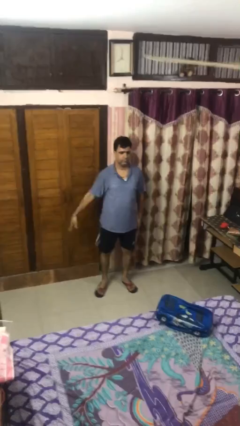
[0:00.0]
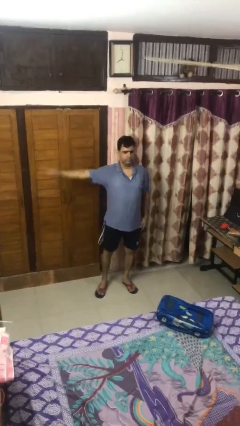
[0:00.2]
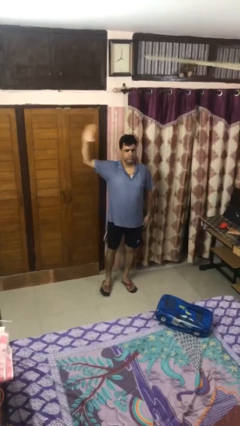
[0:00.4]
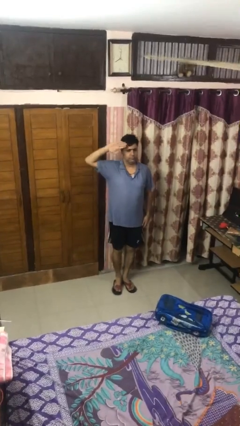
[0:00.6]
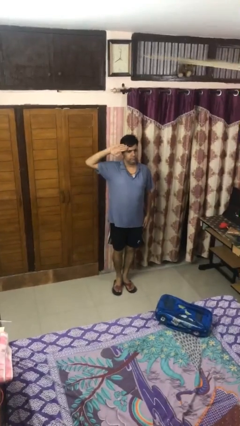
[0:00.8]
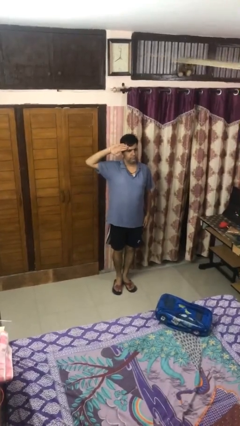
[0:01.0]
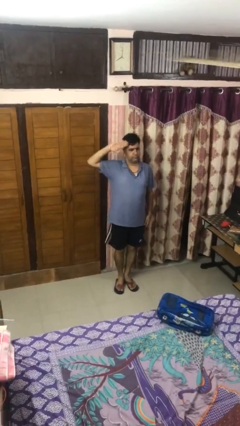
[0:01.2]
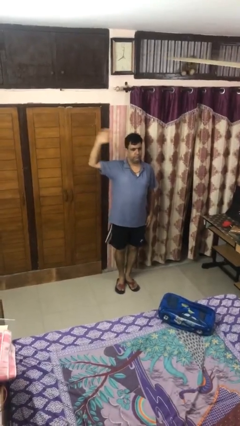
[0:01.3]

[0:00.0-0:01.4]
person salutes

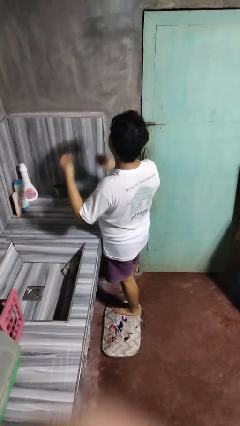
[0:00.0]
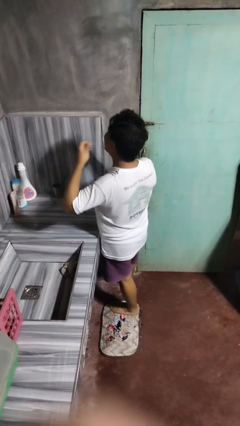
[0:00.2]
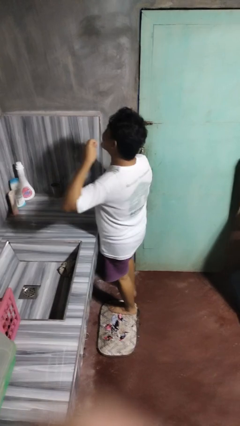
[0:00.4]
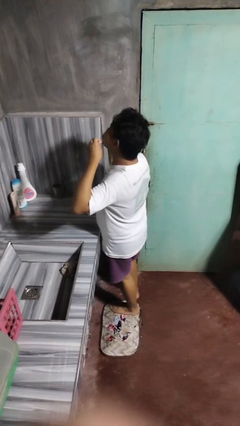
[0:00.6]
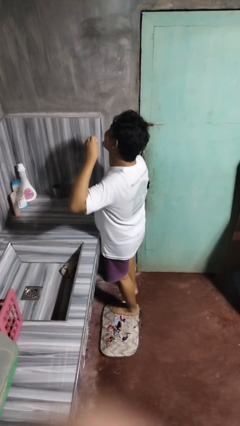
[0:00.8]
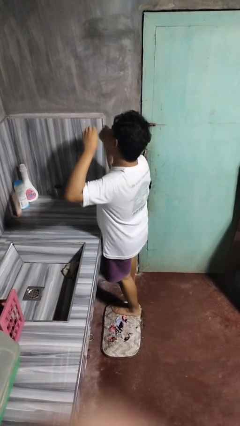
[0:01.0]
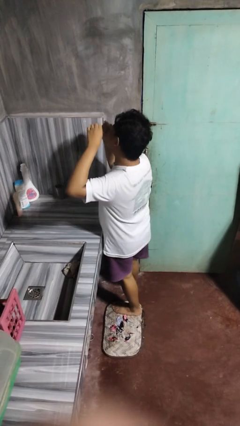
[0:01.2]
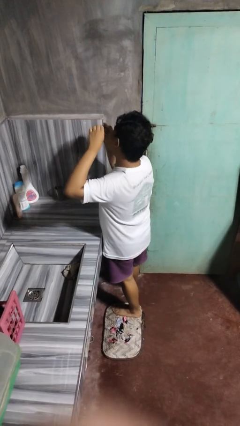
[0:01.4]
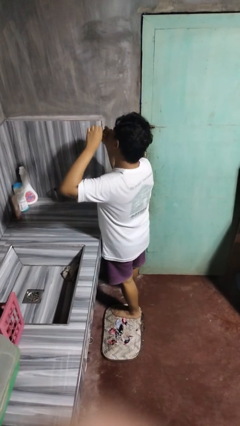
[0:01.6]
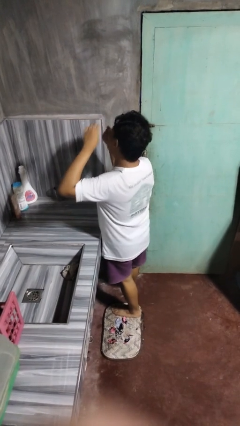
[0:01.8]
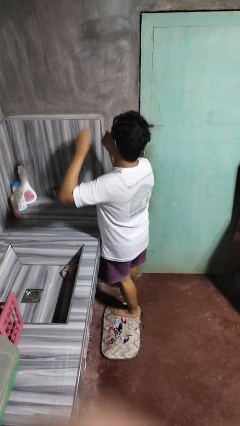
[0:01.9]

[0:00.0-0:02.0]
person flosses

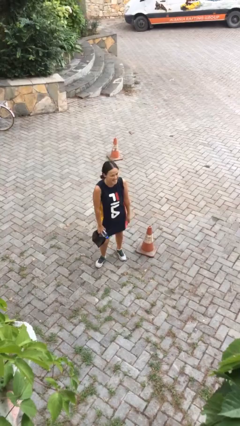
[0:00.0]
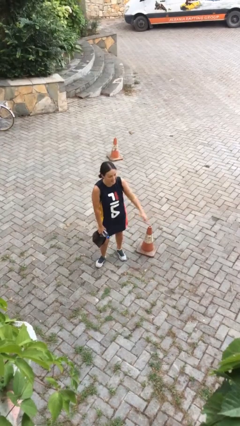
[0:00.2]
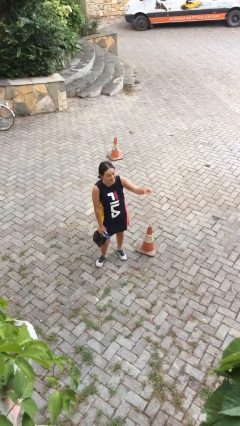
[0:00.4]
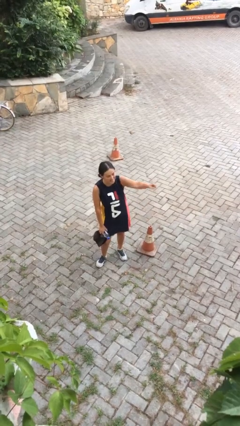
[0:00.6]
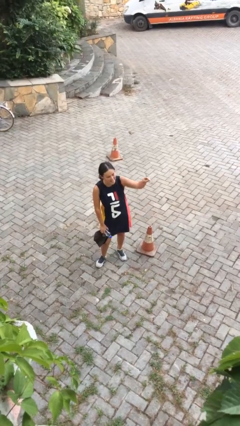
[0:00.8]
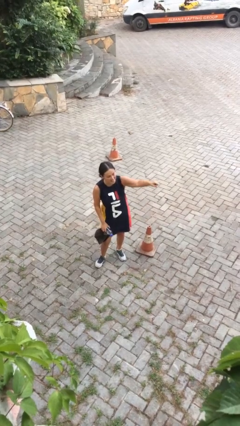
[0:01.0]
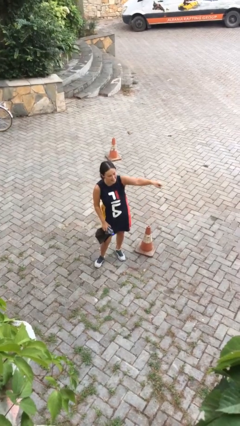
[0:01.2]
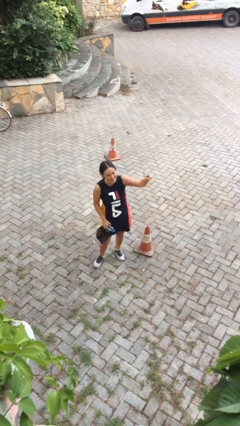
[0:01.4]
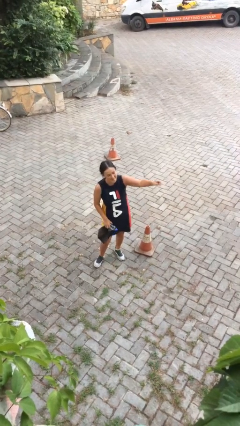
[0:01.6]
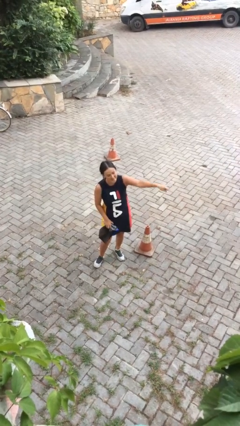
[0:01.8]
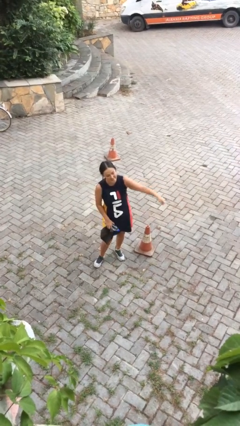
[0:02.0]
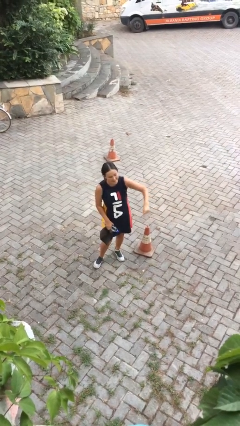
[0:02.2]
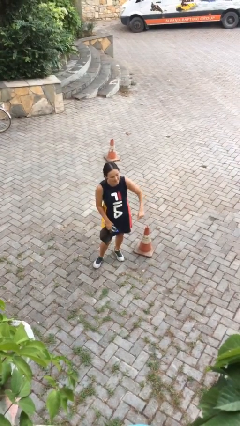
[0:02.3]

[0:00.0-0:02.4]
person points at person

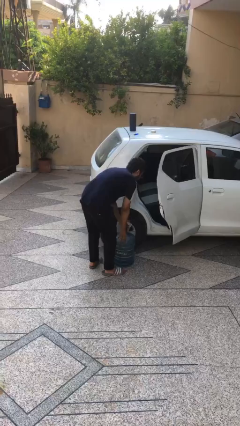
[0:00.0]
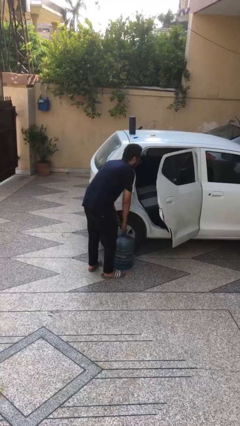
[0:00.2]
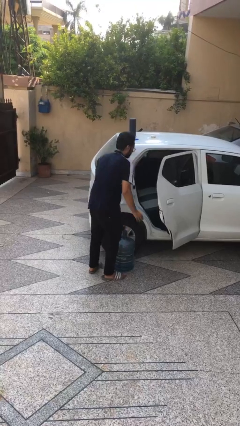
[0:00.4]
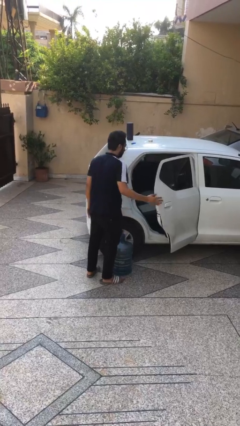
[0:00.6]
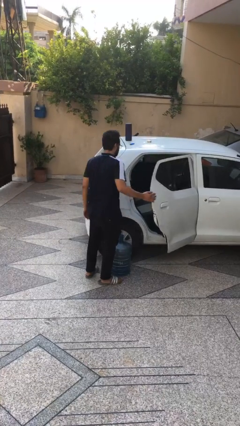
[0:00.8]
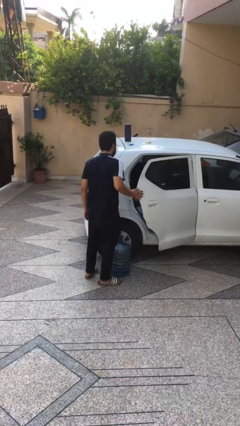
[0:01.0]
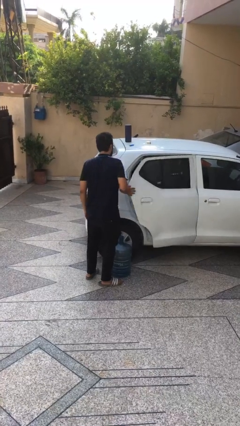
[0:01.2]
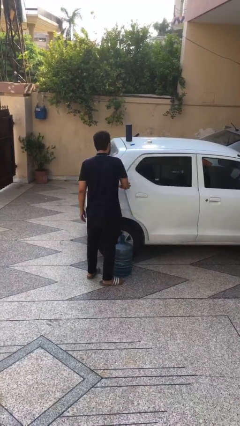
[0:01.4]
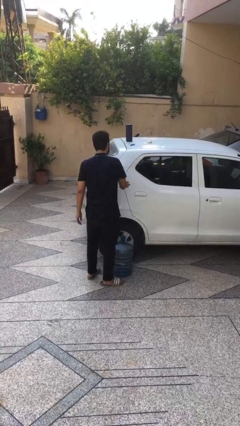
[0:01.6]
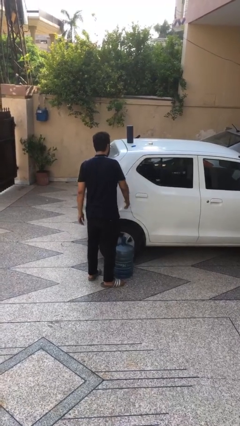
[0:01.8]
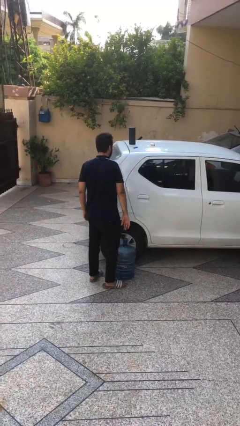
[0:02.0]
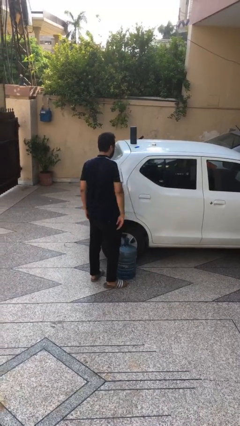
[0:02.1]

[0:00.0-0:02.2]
person closes car door

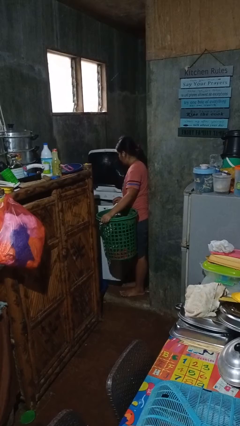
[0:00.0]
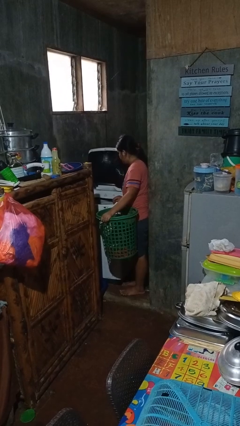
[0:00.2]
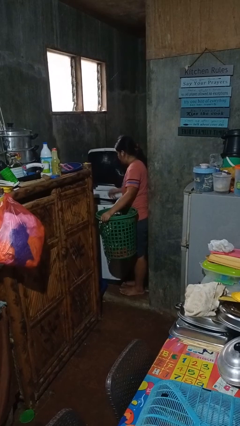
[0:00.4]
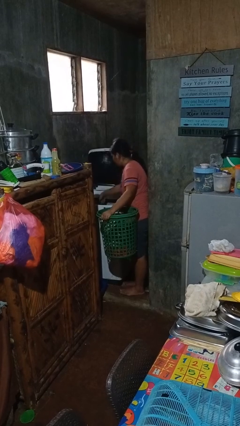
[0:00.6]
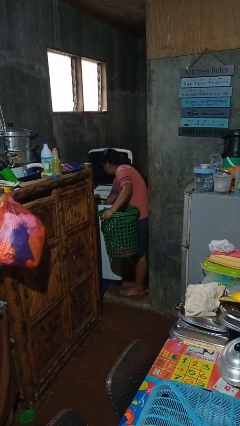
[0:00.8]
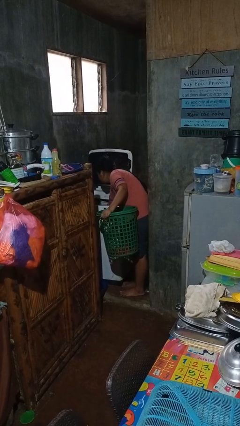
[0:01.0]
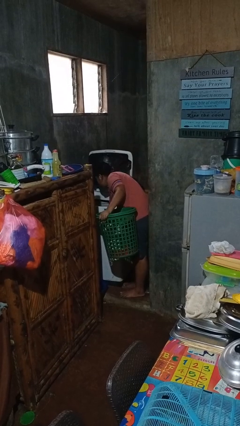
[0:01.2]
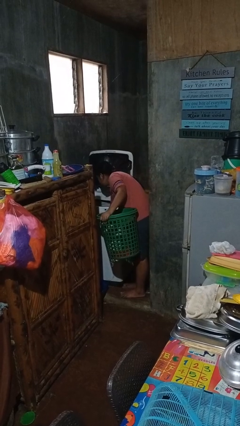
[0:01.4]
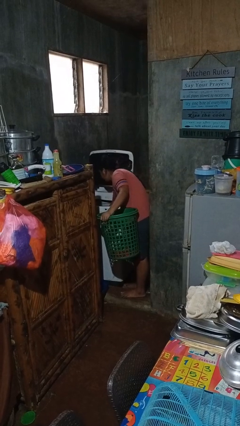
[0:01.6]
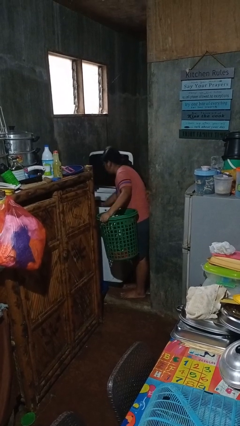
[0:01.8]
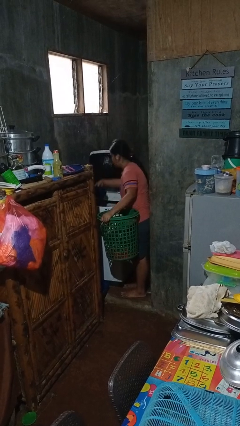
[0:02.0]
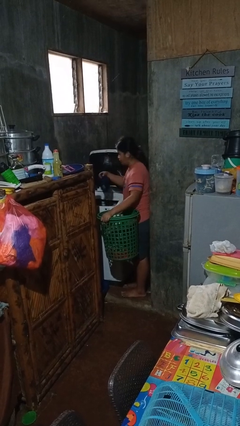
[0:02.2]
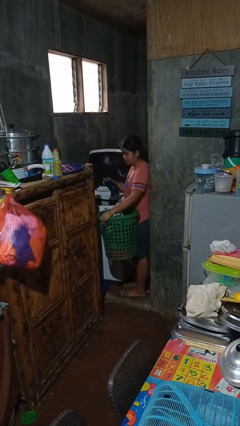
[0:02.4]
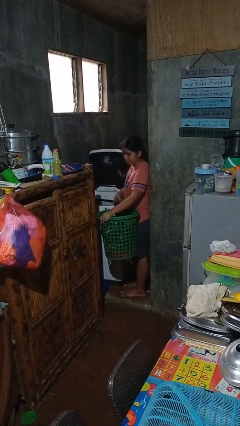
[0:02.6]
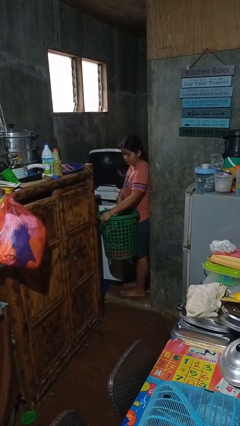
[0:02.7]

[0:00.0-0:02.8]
person unloads clotheswasher

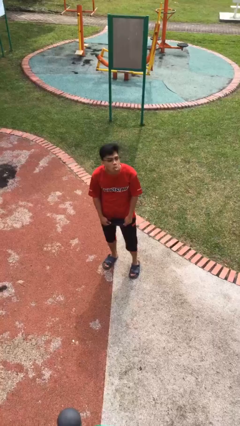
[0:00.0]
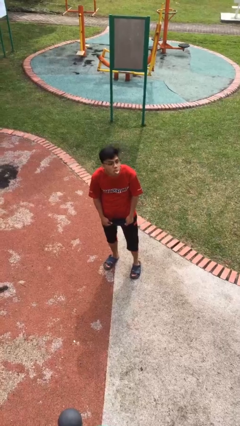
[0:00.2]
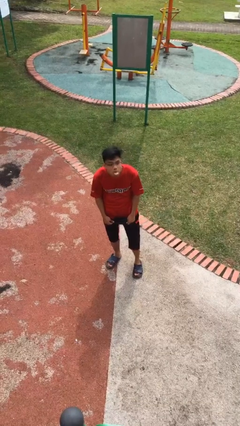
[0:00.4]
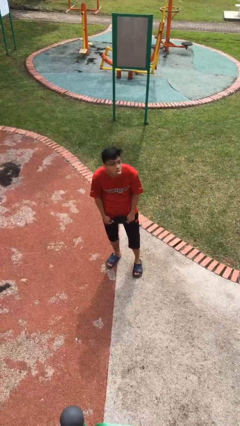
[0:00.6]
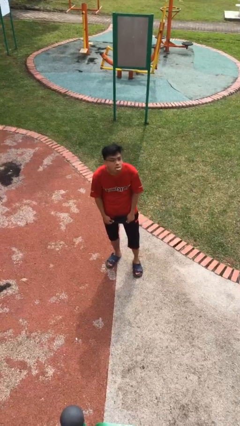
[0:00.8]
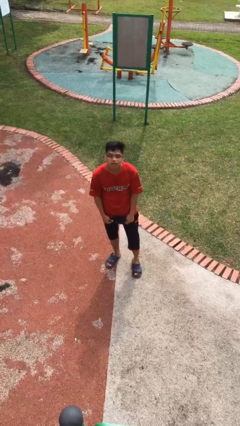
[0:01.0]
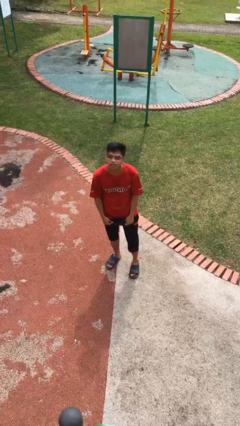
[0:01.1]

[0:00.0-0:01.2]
person sticks out tongue

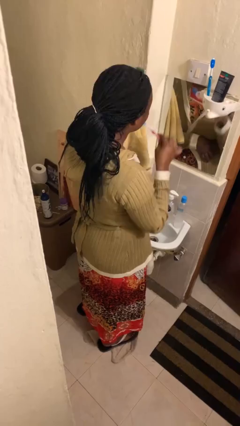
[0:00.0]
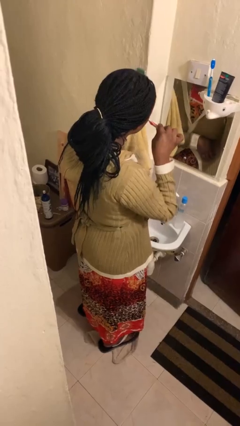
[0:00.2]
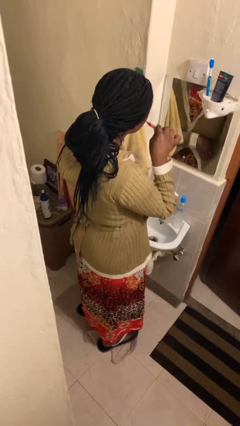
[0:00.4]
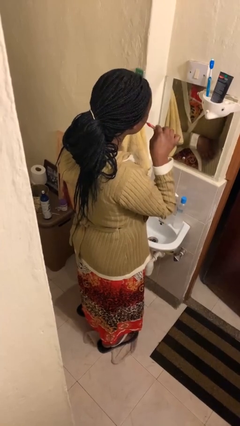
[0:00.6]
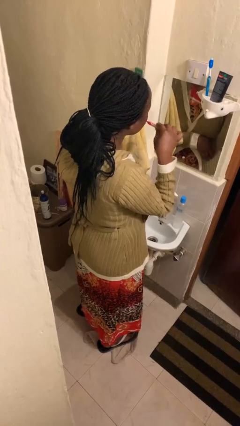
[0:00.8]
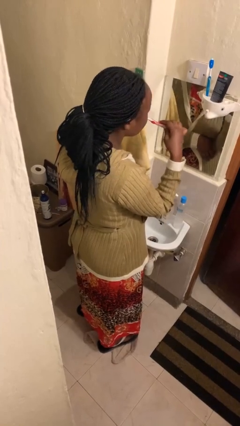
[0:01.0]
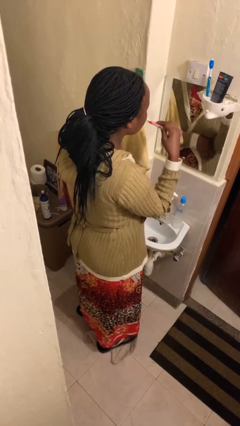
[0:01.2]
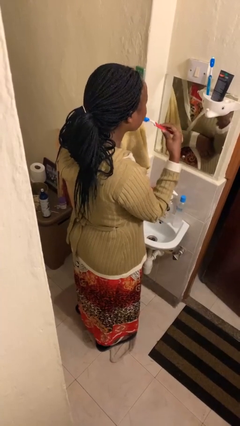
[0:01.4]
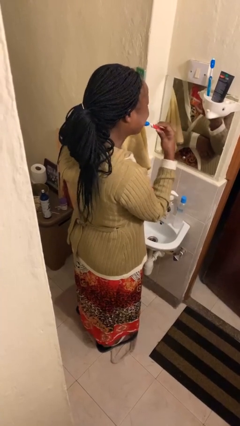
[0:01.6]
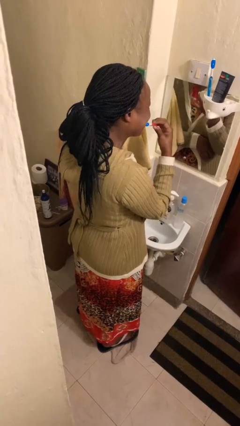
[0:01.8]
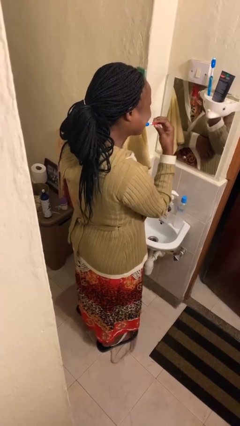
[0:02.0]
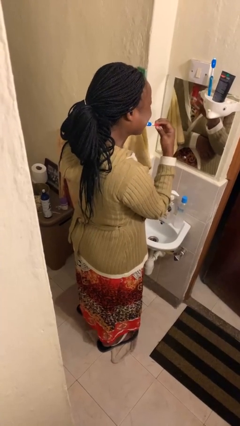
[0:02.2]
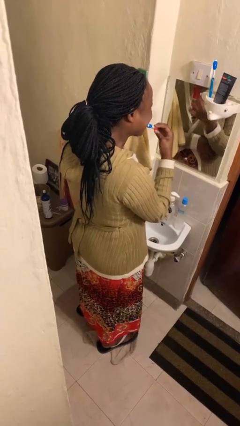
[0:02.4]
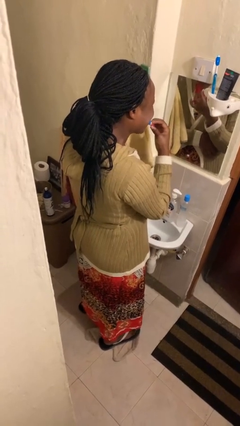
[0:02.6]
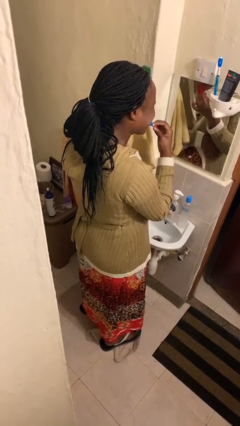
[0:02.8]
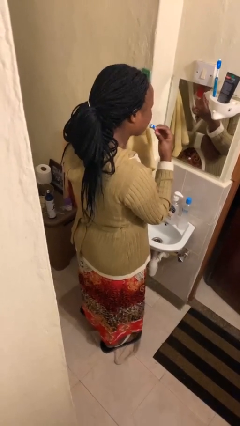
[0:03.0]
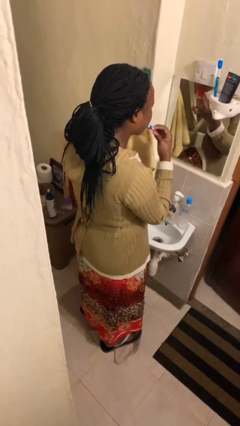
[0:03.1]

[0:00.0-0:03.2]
person brushes teeth

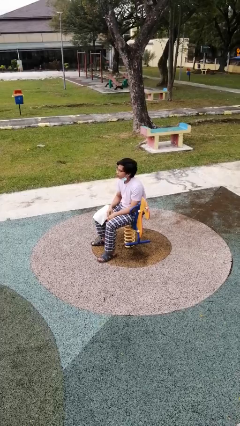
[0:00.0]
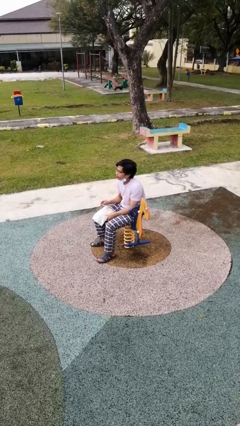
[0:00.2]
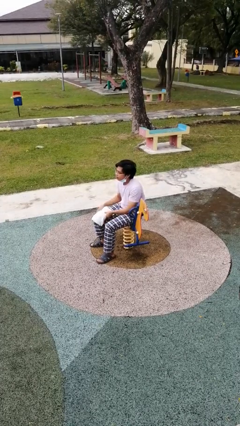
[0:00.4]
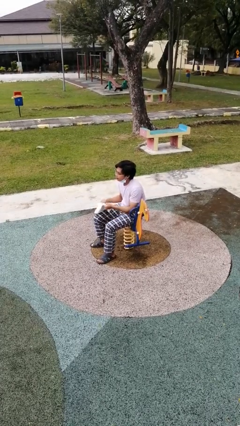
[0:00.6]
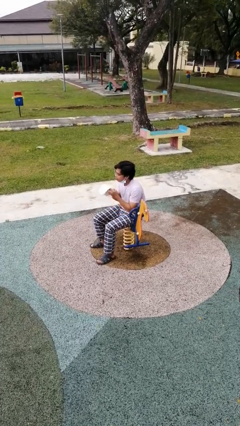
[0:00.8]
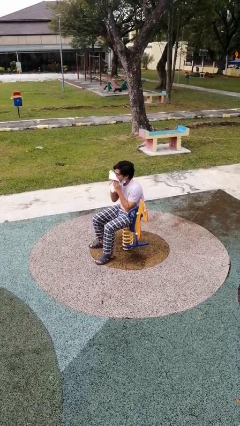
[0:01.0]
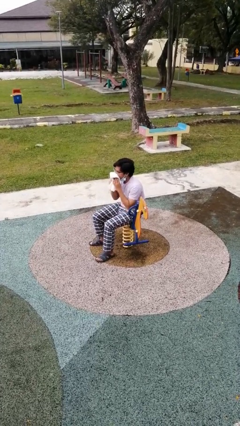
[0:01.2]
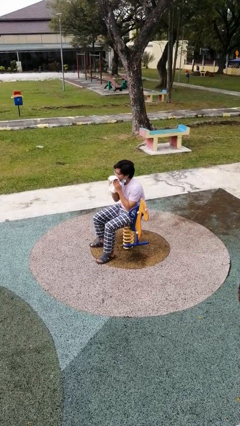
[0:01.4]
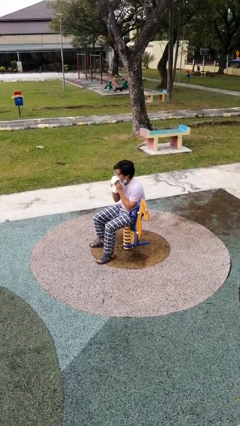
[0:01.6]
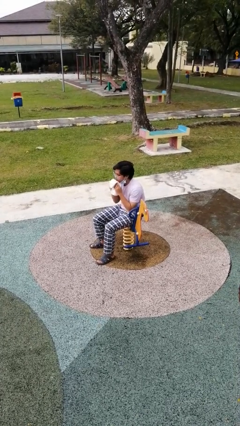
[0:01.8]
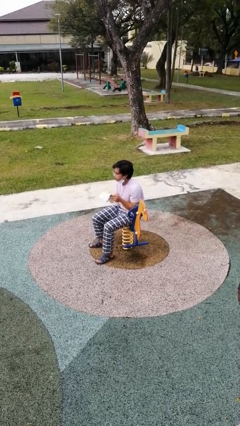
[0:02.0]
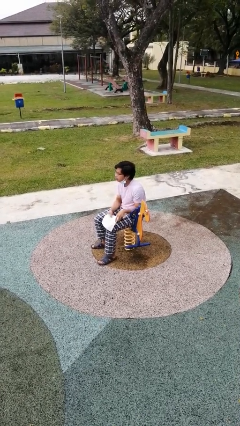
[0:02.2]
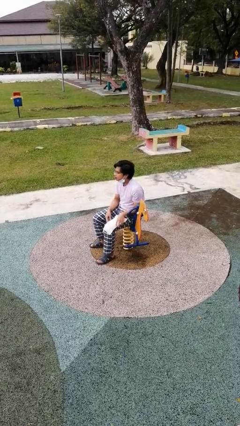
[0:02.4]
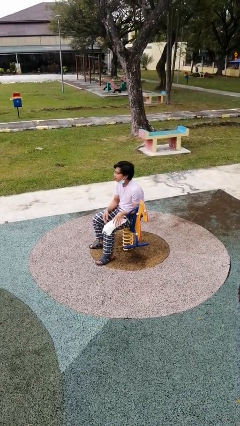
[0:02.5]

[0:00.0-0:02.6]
person wipes mouth with napkin
